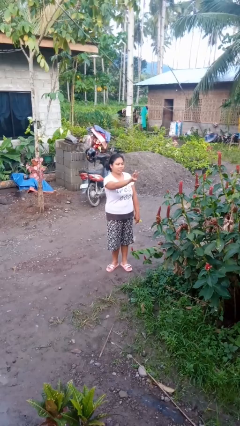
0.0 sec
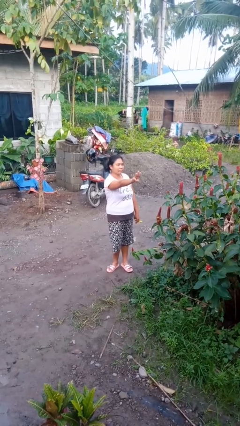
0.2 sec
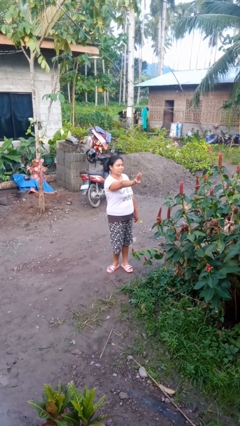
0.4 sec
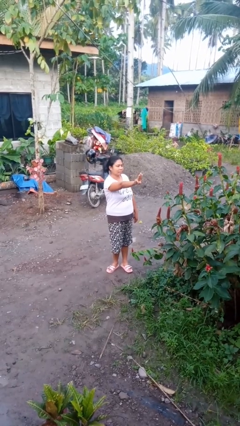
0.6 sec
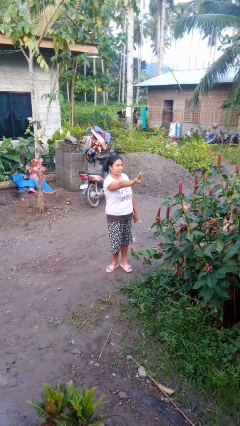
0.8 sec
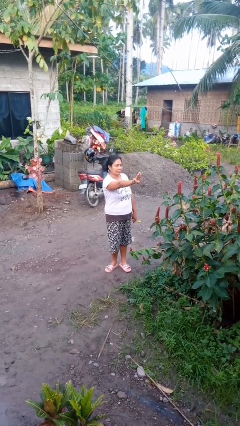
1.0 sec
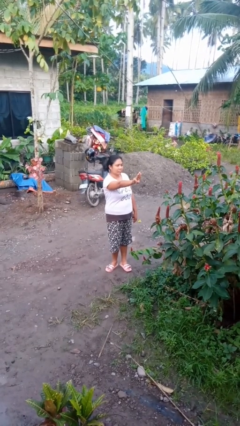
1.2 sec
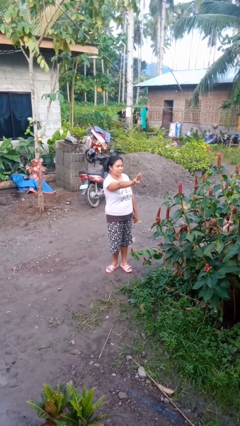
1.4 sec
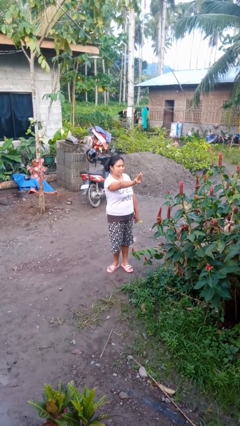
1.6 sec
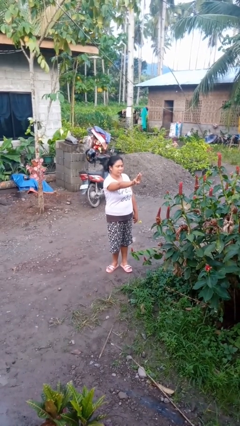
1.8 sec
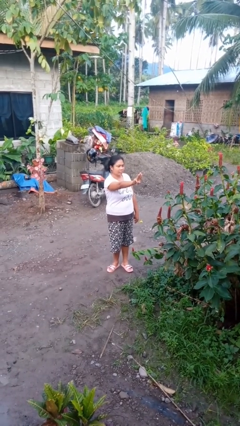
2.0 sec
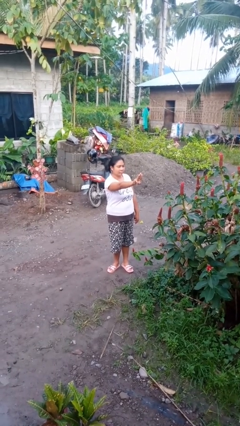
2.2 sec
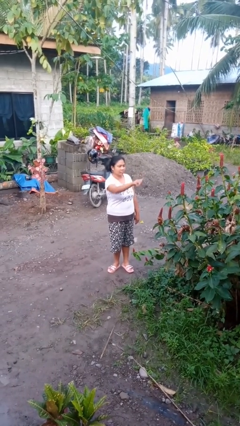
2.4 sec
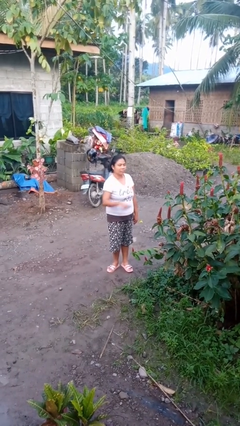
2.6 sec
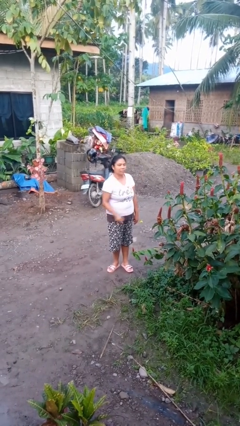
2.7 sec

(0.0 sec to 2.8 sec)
person gestures number three

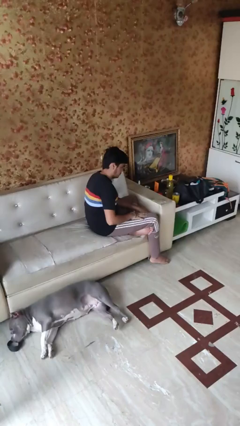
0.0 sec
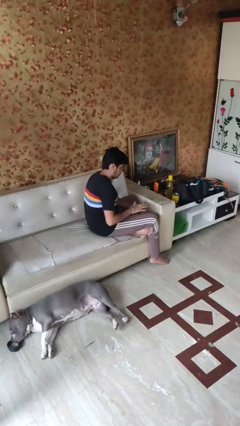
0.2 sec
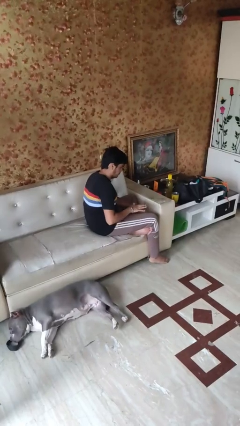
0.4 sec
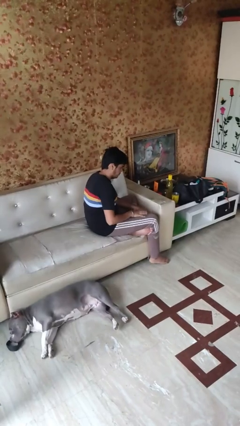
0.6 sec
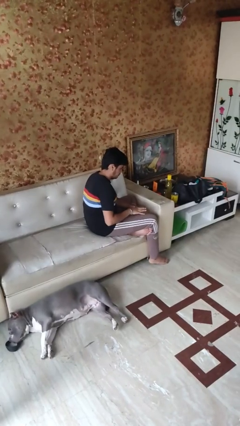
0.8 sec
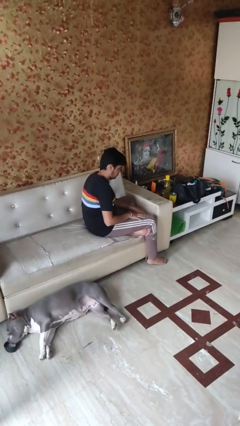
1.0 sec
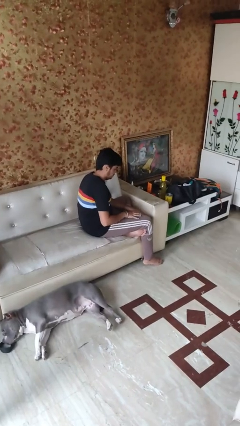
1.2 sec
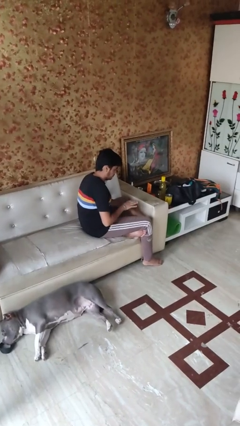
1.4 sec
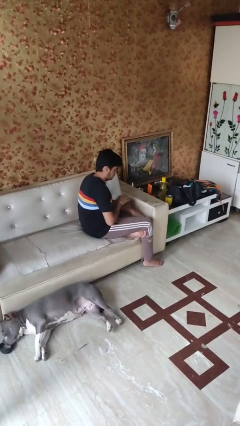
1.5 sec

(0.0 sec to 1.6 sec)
person slaps hands on thighs

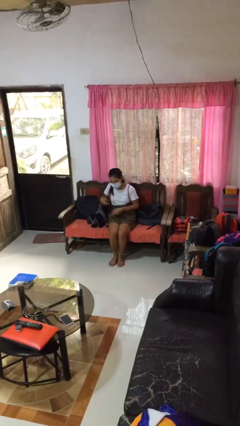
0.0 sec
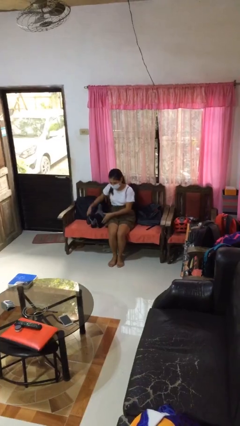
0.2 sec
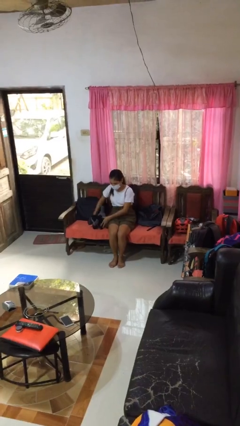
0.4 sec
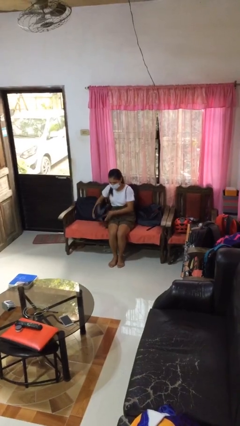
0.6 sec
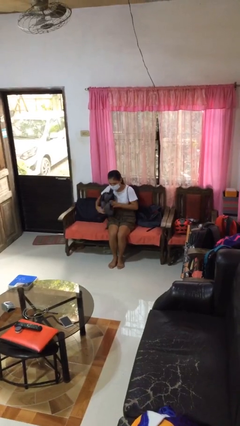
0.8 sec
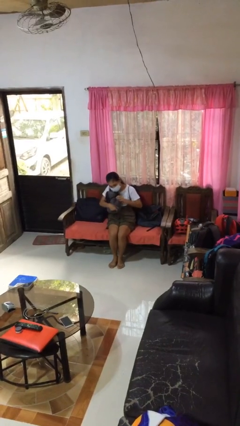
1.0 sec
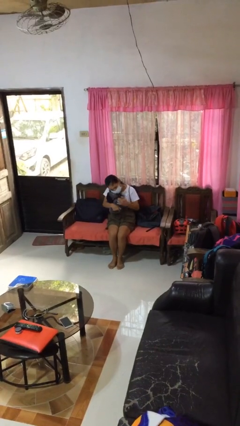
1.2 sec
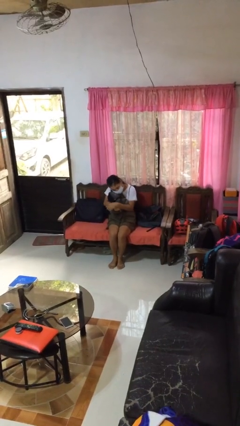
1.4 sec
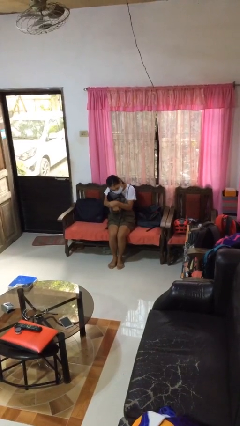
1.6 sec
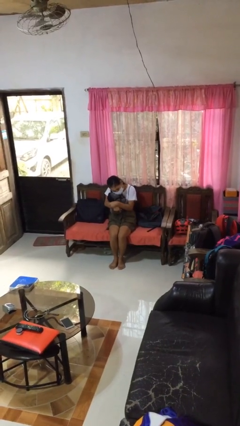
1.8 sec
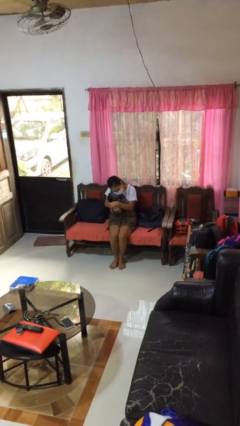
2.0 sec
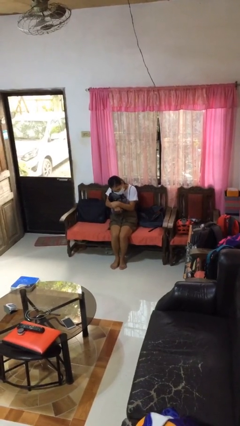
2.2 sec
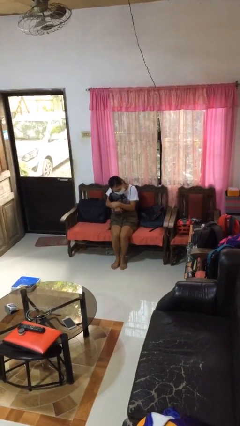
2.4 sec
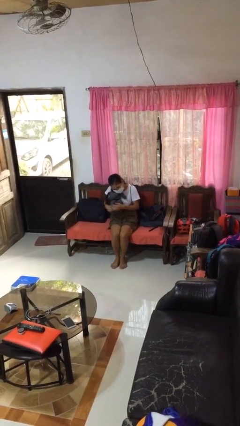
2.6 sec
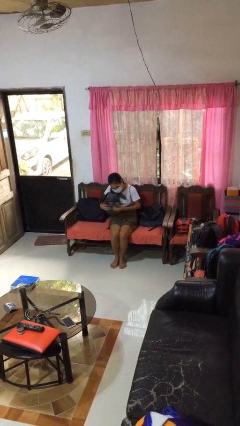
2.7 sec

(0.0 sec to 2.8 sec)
person hugs stuffed animal

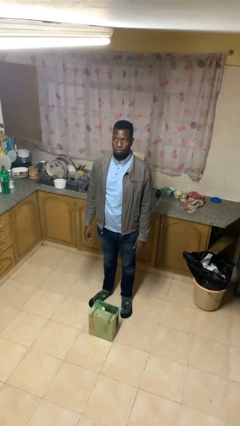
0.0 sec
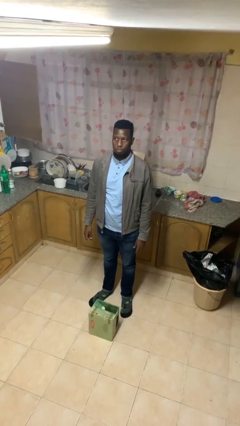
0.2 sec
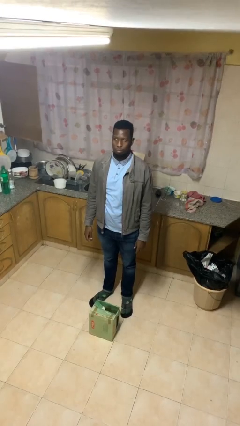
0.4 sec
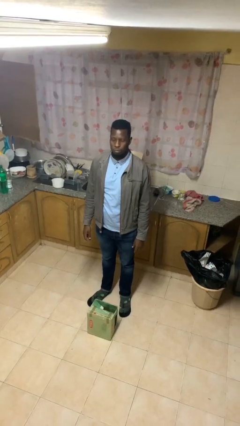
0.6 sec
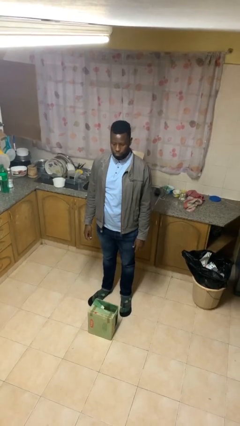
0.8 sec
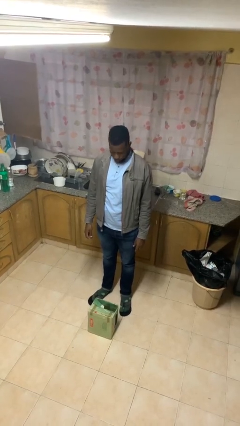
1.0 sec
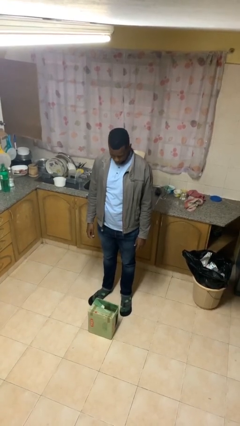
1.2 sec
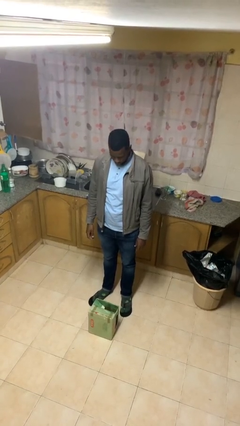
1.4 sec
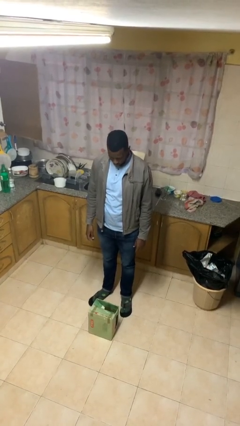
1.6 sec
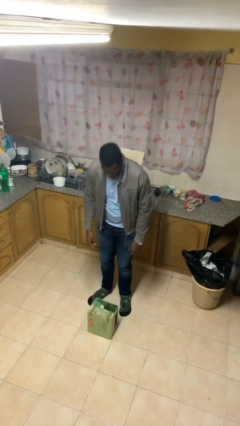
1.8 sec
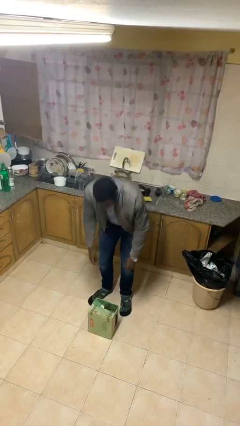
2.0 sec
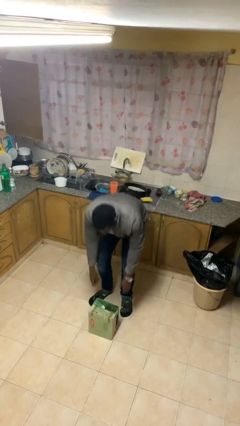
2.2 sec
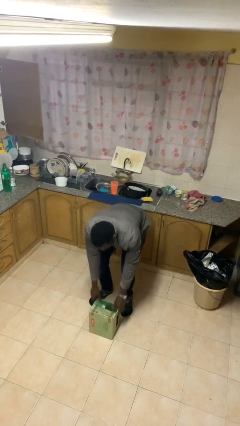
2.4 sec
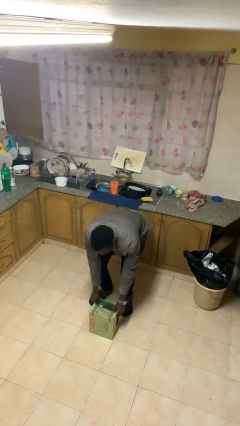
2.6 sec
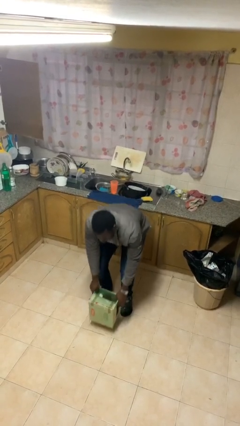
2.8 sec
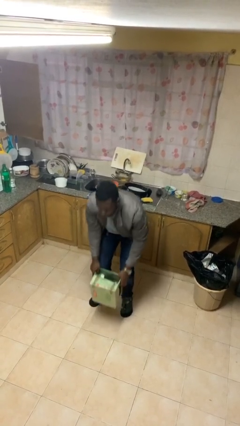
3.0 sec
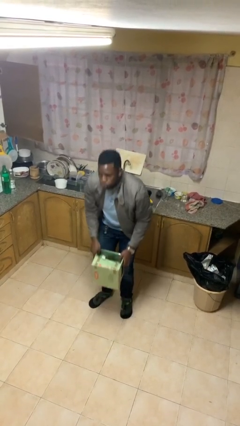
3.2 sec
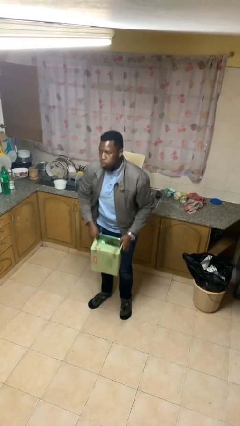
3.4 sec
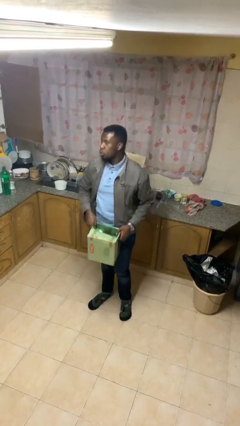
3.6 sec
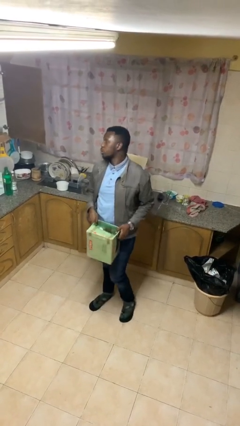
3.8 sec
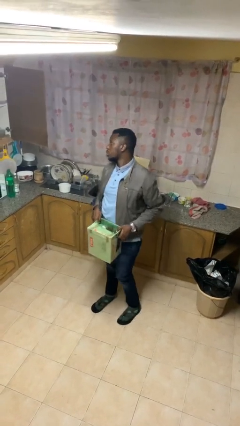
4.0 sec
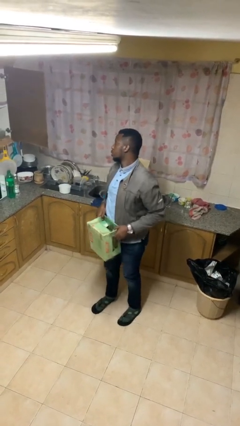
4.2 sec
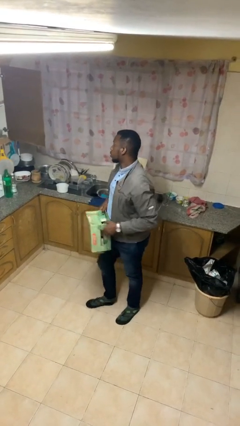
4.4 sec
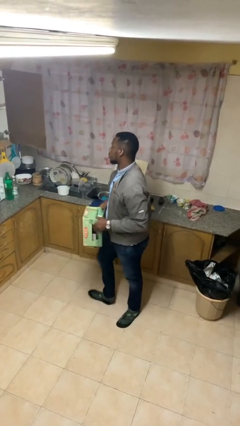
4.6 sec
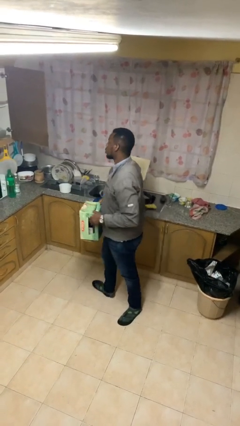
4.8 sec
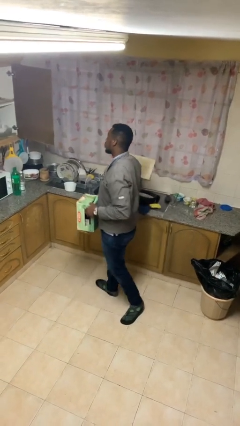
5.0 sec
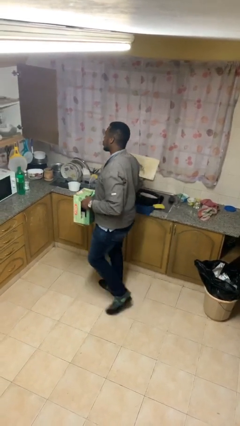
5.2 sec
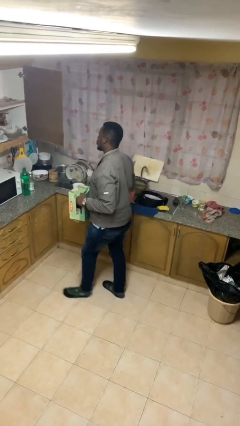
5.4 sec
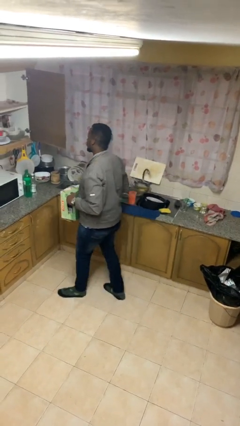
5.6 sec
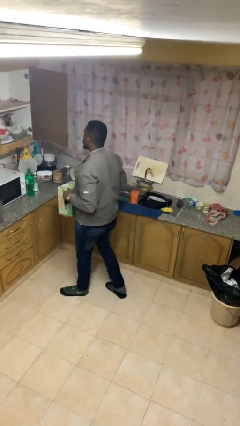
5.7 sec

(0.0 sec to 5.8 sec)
person picks up object from floor

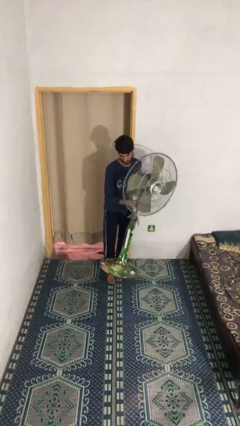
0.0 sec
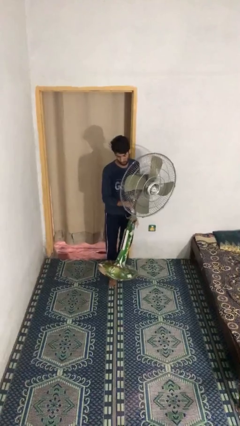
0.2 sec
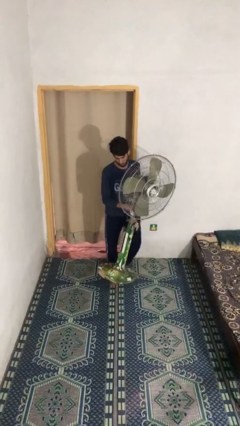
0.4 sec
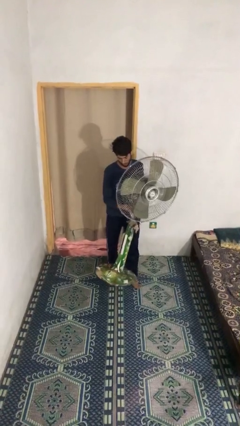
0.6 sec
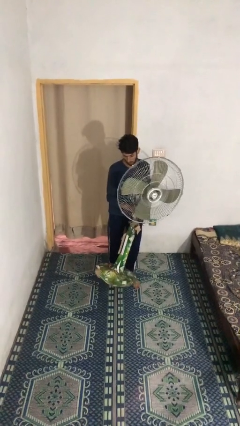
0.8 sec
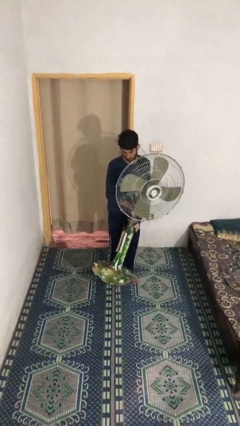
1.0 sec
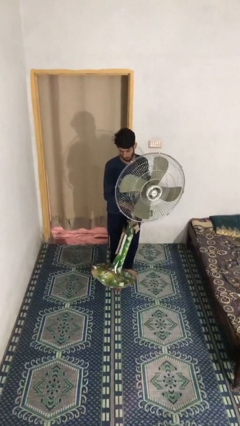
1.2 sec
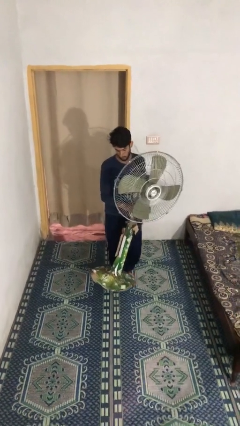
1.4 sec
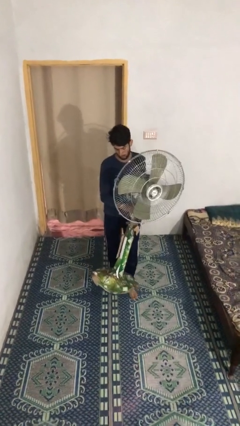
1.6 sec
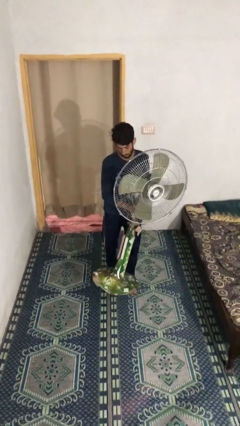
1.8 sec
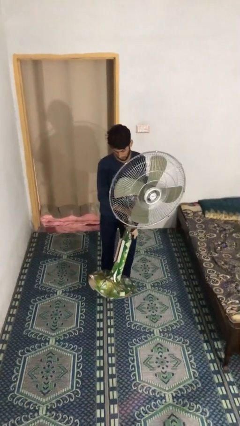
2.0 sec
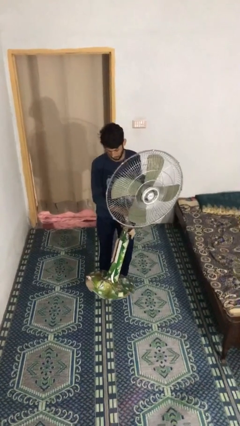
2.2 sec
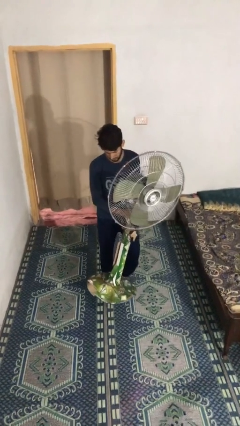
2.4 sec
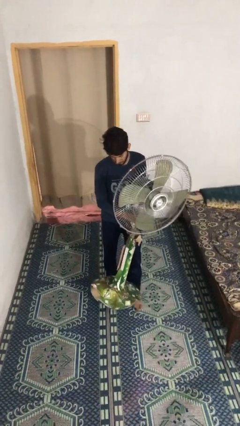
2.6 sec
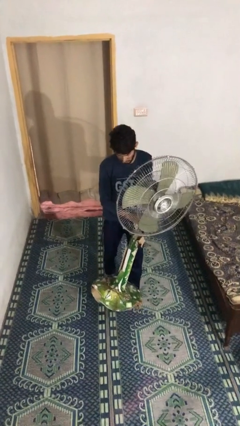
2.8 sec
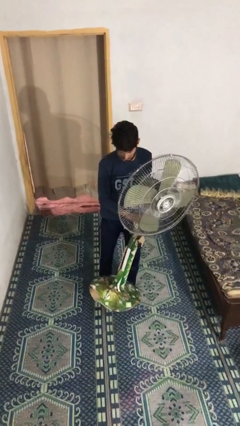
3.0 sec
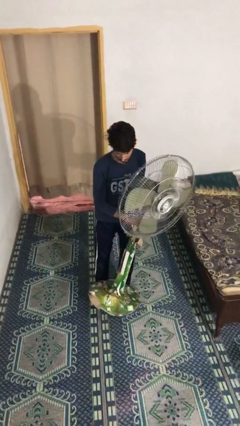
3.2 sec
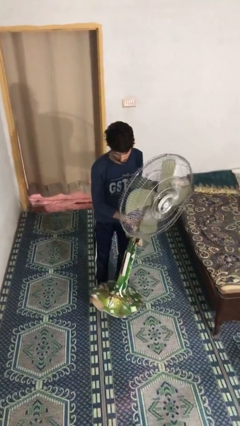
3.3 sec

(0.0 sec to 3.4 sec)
person carries heavy object

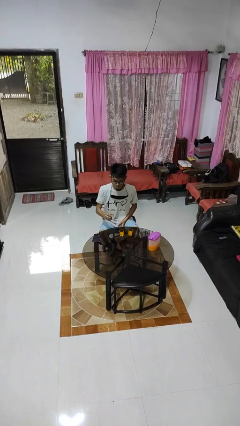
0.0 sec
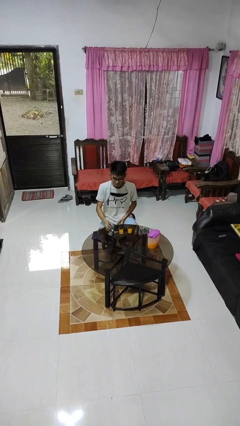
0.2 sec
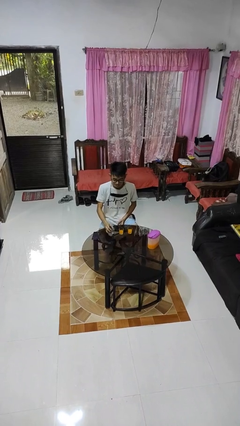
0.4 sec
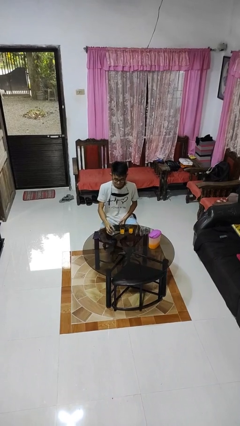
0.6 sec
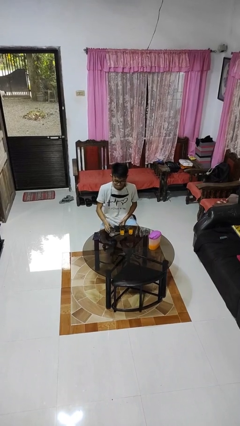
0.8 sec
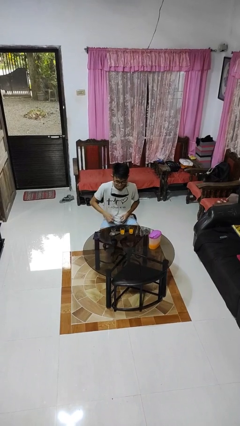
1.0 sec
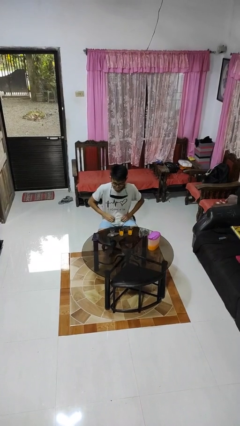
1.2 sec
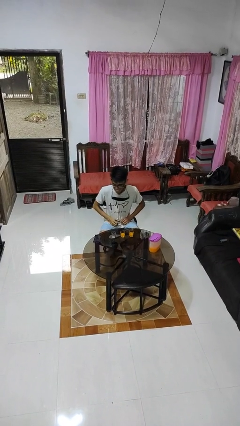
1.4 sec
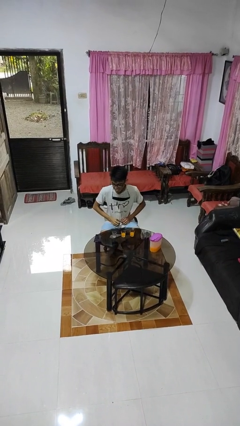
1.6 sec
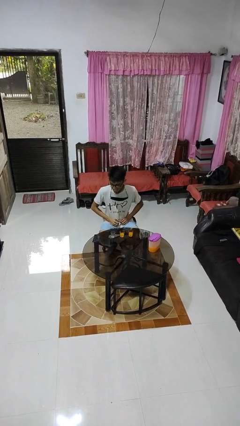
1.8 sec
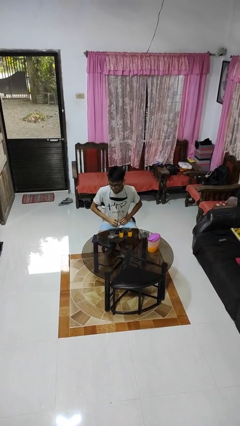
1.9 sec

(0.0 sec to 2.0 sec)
person puts down object on table
